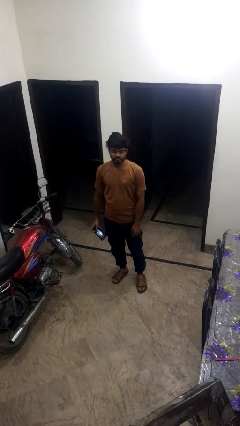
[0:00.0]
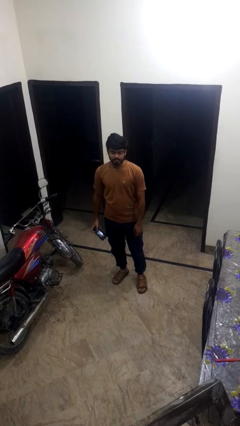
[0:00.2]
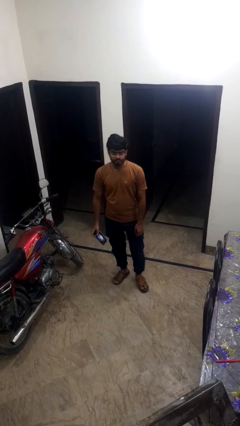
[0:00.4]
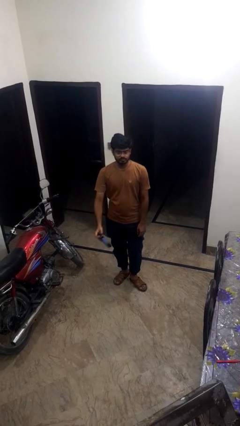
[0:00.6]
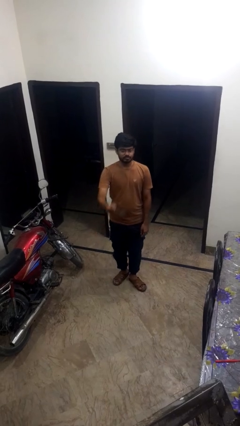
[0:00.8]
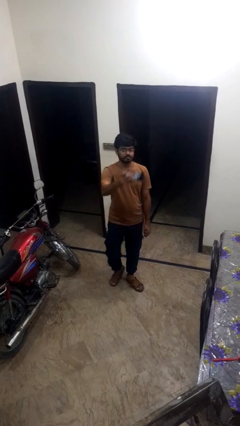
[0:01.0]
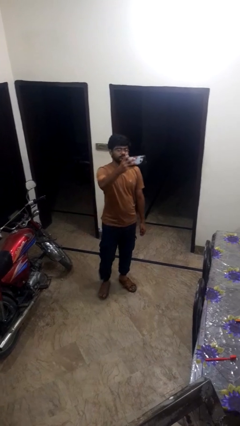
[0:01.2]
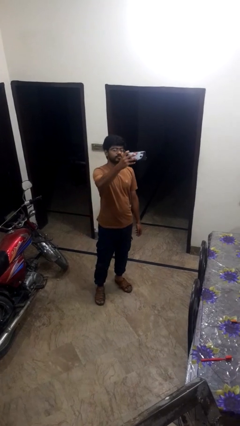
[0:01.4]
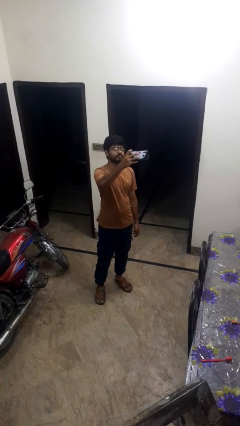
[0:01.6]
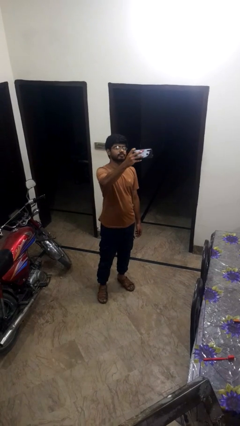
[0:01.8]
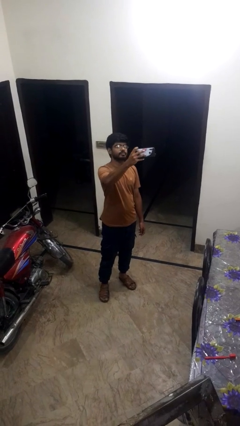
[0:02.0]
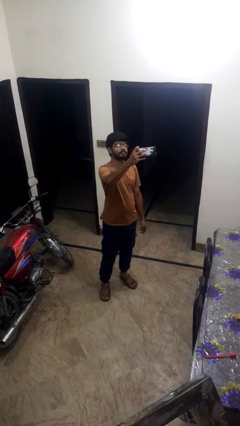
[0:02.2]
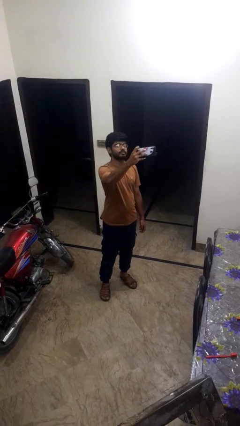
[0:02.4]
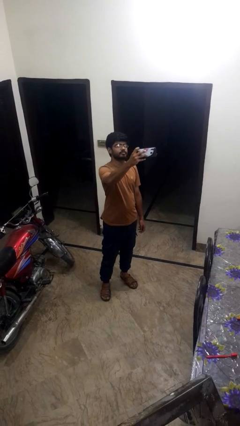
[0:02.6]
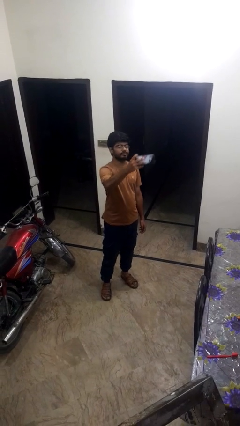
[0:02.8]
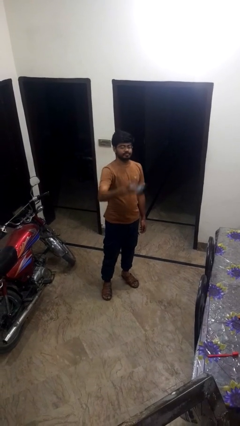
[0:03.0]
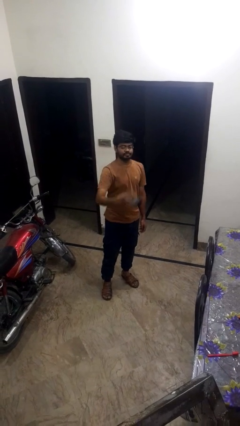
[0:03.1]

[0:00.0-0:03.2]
person takes selfie

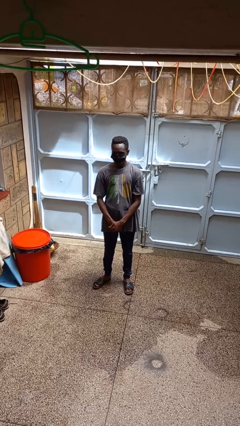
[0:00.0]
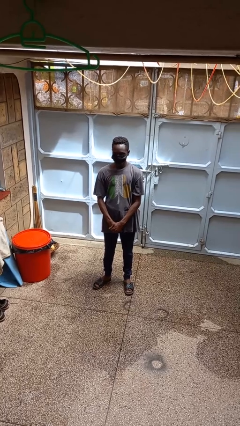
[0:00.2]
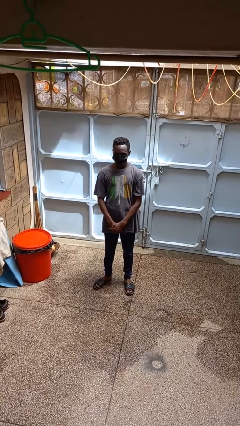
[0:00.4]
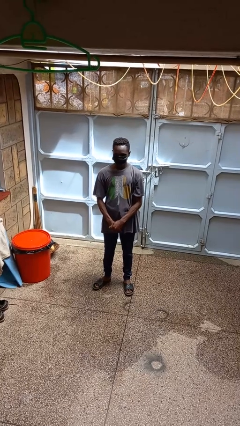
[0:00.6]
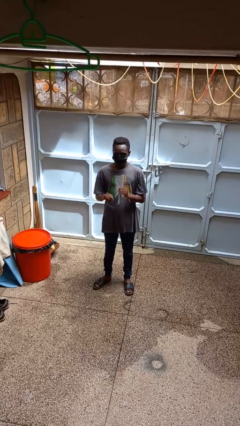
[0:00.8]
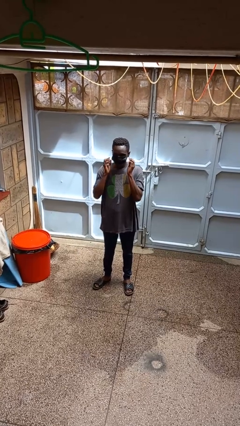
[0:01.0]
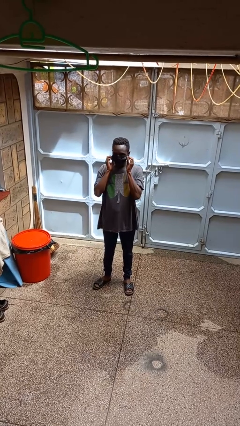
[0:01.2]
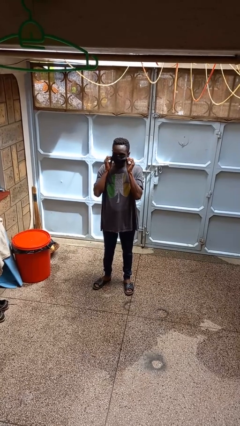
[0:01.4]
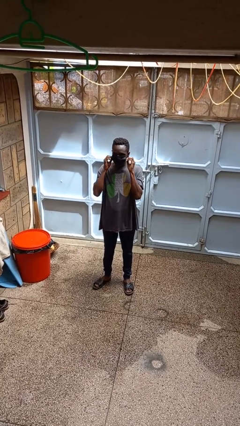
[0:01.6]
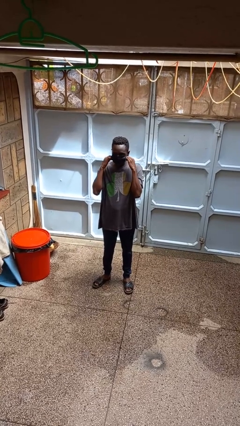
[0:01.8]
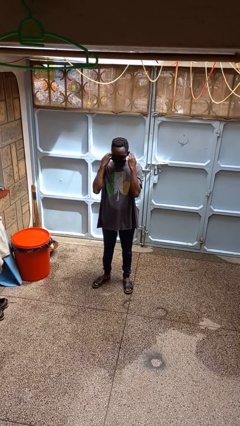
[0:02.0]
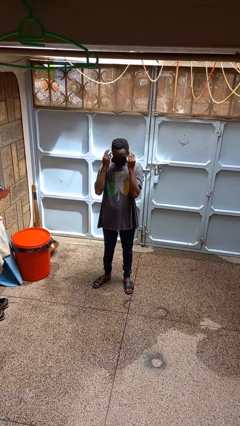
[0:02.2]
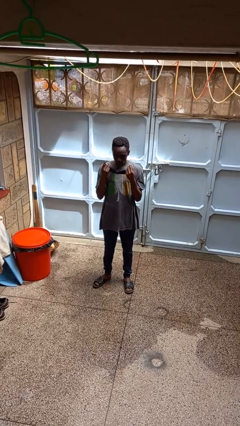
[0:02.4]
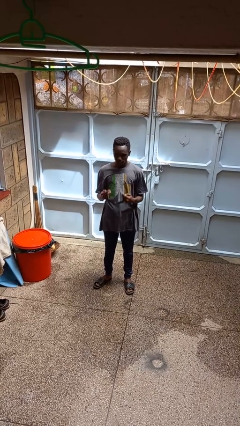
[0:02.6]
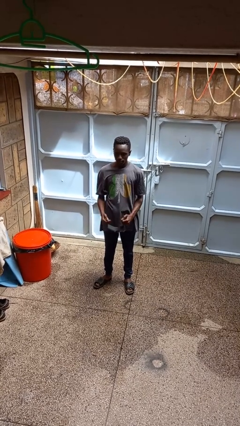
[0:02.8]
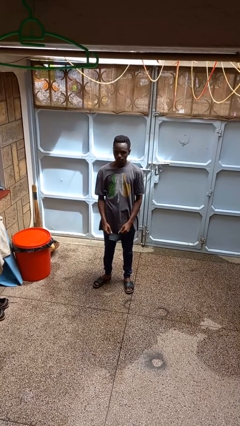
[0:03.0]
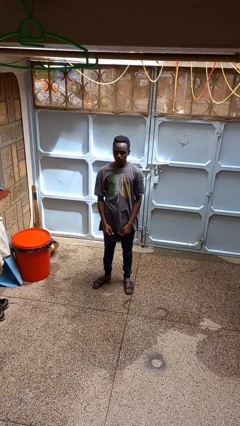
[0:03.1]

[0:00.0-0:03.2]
person takes off facemask

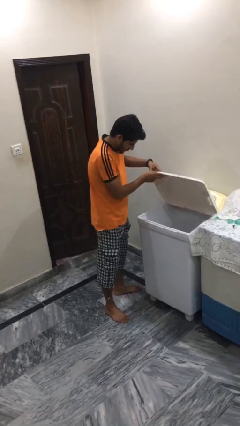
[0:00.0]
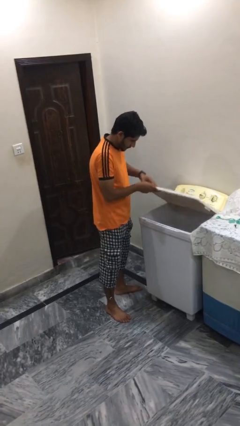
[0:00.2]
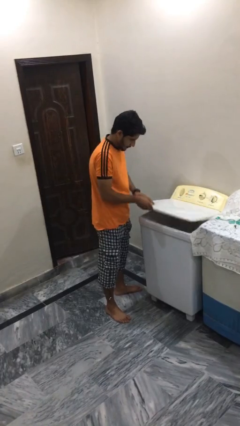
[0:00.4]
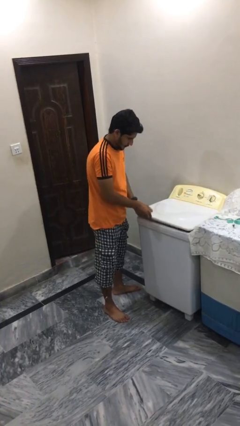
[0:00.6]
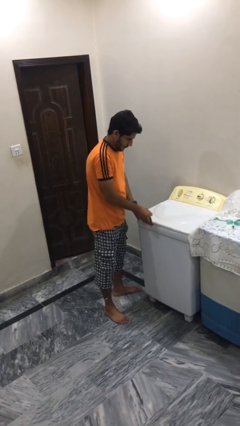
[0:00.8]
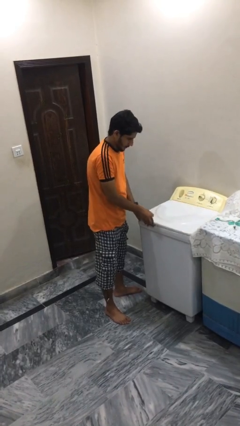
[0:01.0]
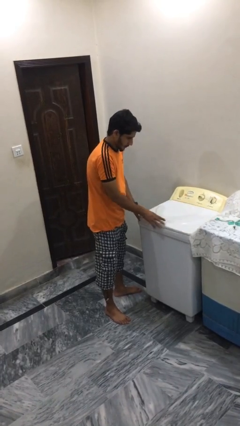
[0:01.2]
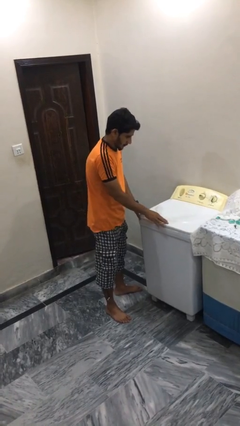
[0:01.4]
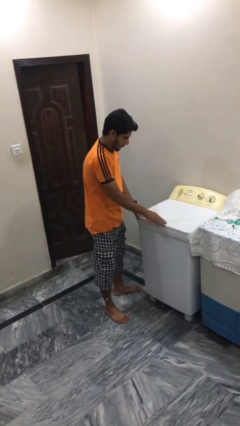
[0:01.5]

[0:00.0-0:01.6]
person closes clothes washer

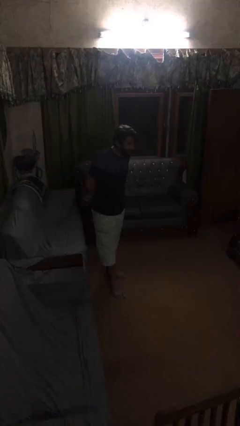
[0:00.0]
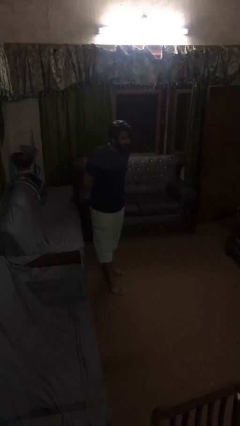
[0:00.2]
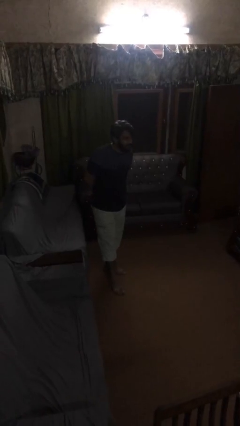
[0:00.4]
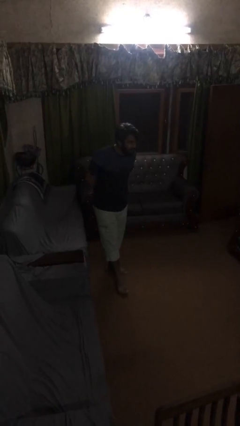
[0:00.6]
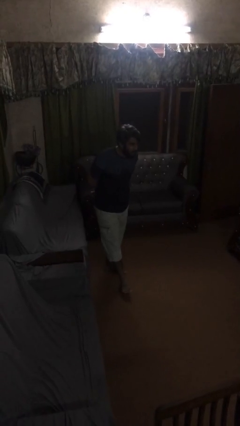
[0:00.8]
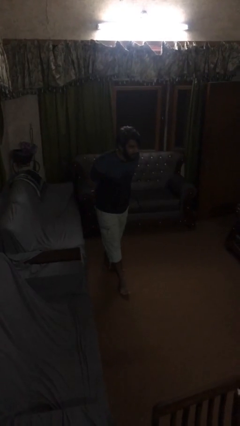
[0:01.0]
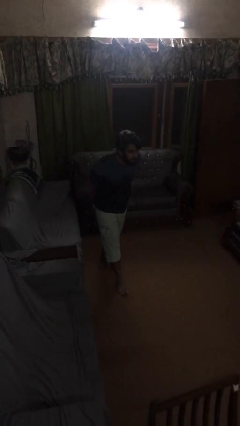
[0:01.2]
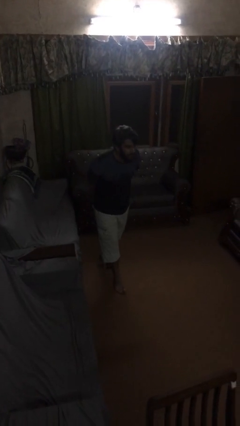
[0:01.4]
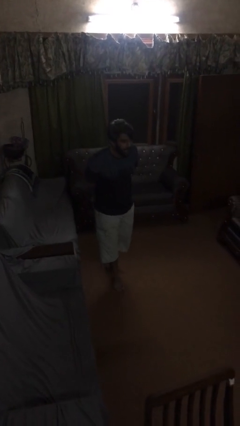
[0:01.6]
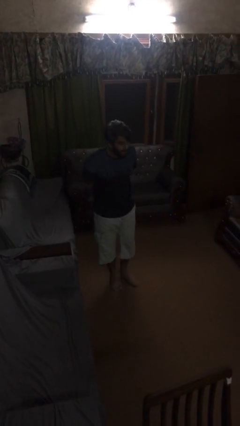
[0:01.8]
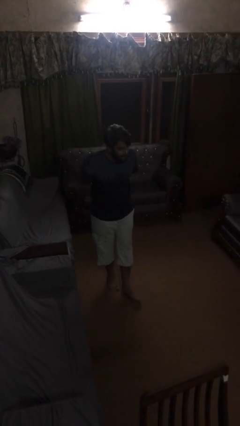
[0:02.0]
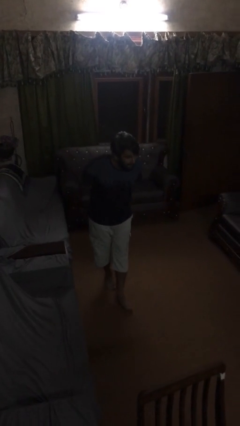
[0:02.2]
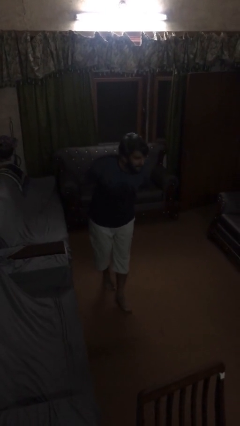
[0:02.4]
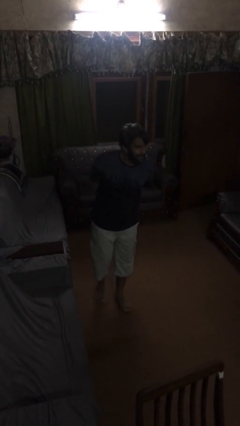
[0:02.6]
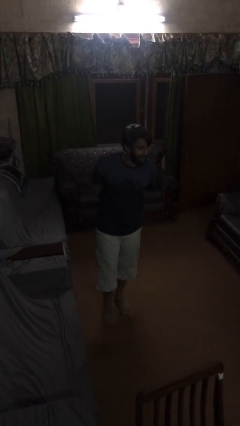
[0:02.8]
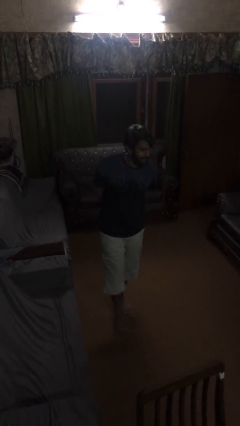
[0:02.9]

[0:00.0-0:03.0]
person steals object from person

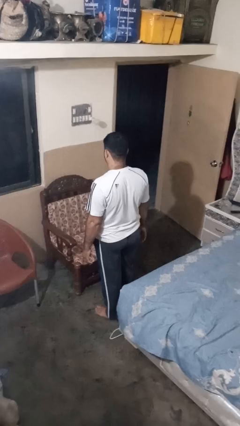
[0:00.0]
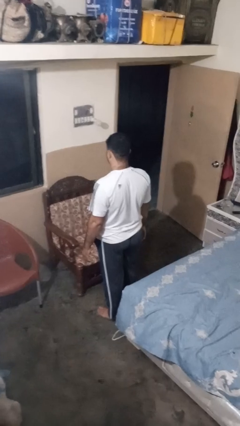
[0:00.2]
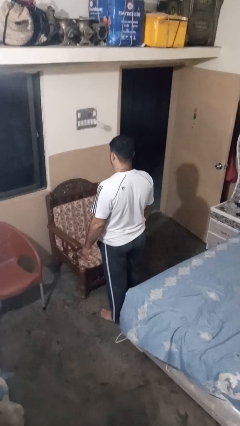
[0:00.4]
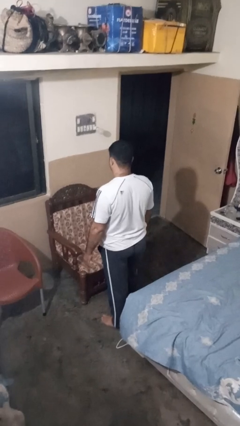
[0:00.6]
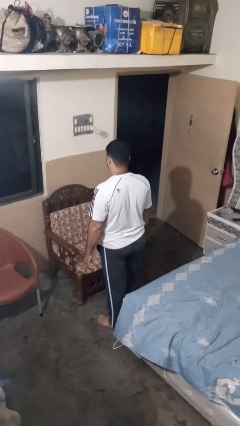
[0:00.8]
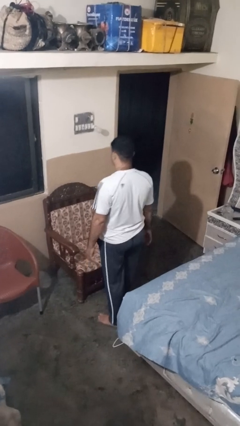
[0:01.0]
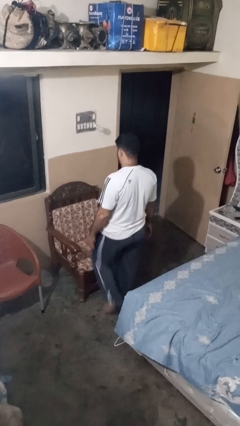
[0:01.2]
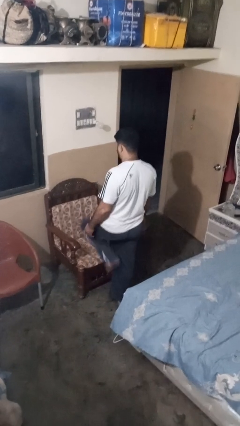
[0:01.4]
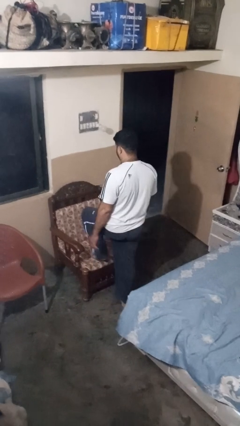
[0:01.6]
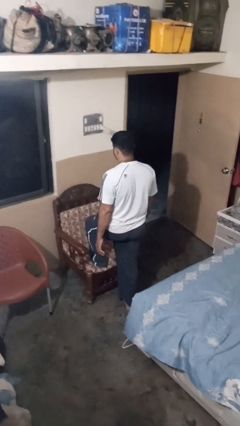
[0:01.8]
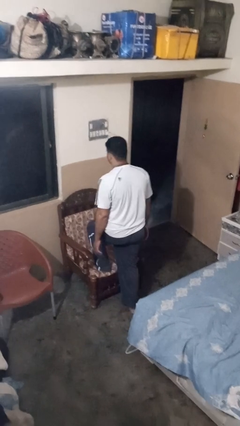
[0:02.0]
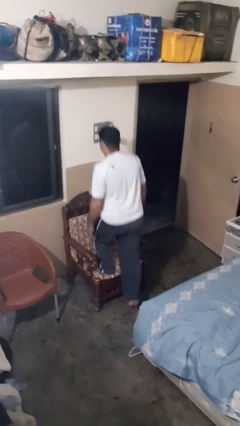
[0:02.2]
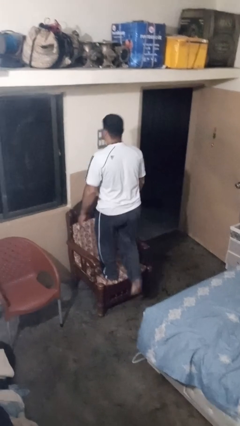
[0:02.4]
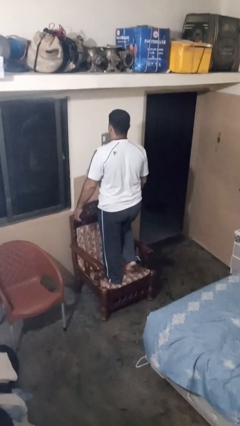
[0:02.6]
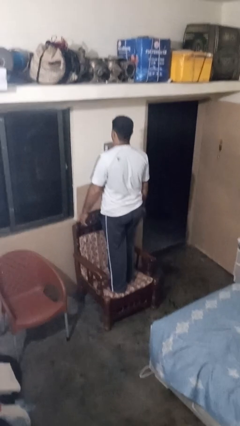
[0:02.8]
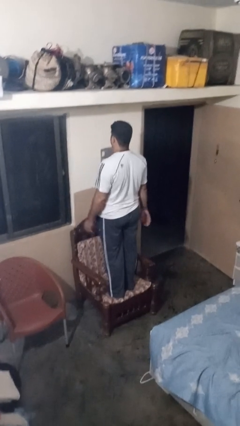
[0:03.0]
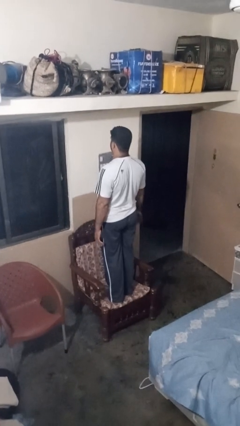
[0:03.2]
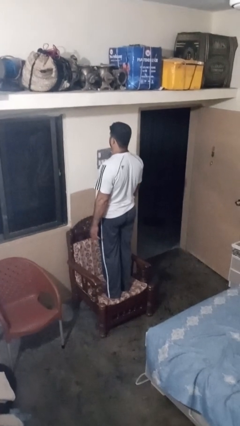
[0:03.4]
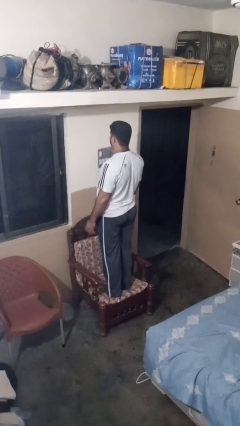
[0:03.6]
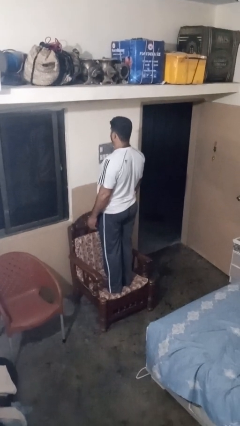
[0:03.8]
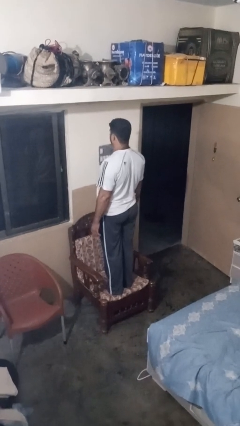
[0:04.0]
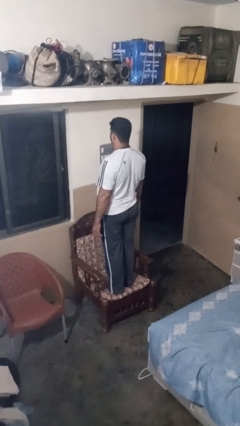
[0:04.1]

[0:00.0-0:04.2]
person climbs on couch

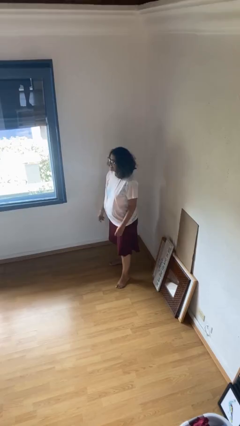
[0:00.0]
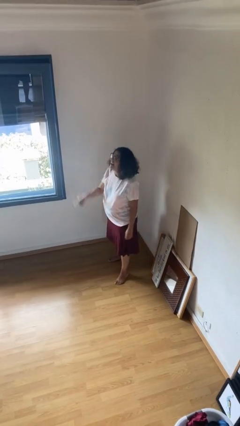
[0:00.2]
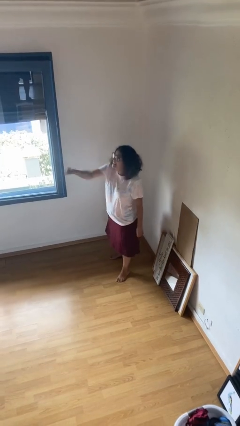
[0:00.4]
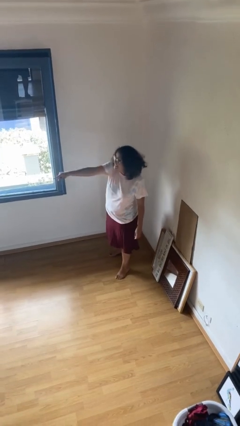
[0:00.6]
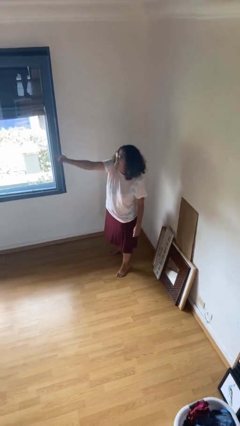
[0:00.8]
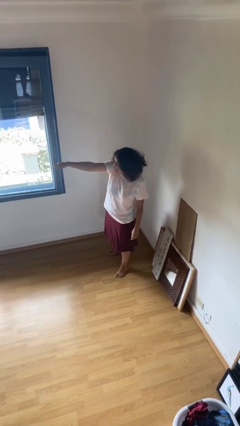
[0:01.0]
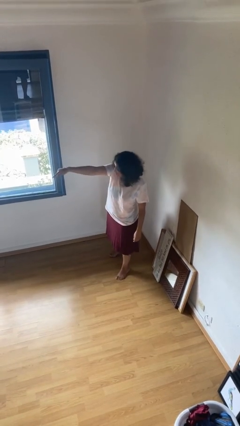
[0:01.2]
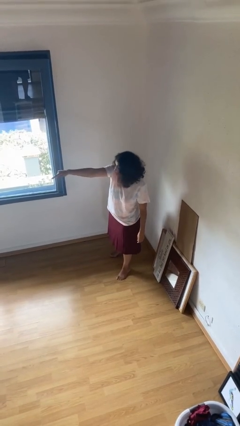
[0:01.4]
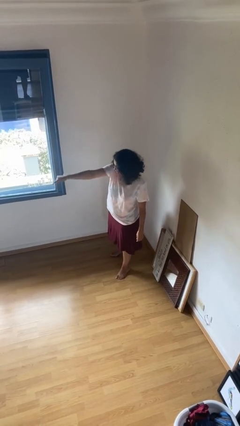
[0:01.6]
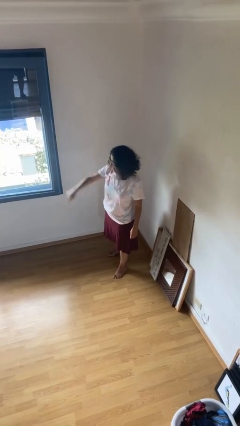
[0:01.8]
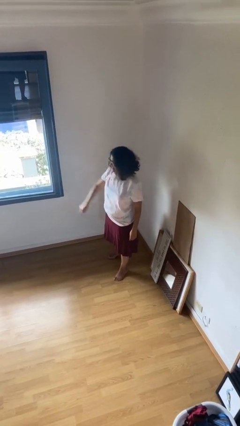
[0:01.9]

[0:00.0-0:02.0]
person points at person
